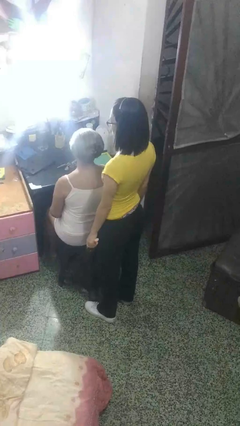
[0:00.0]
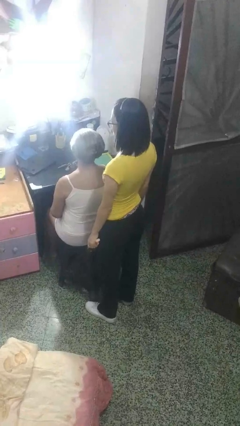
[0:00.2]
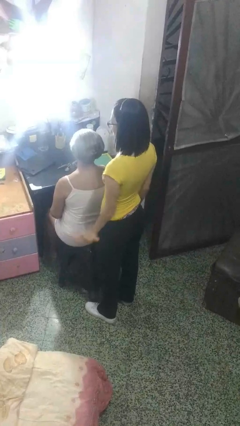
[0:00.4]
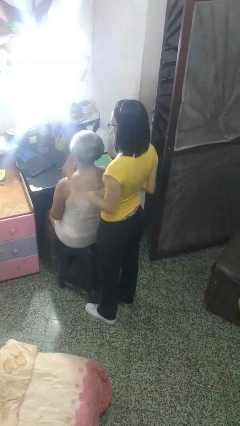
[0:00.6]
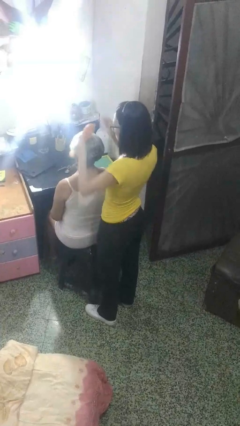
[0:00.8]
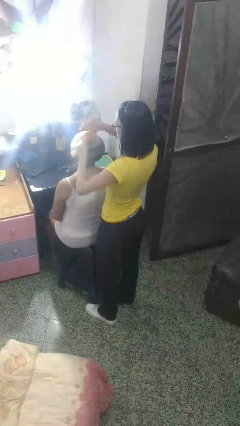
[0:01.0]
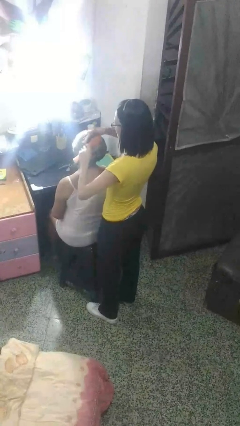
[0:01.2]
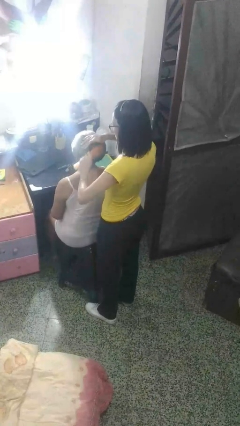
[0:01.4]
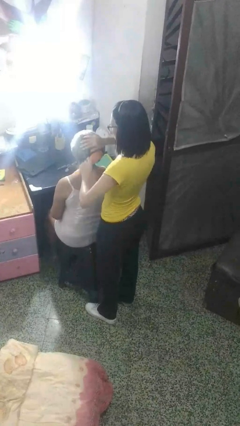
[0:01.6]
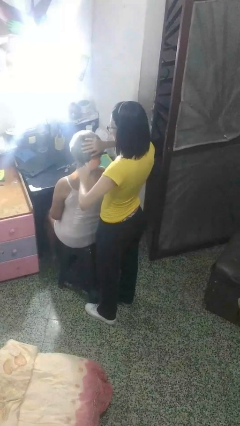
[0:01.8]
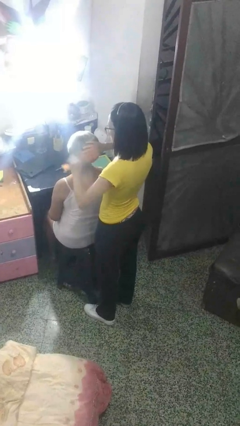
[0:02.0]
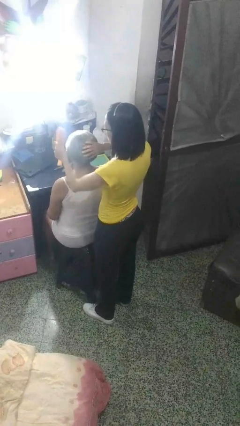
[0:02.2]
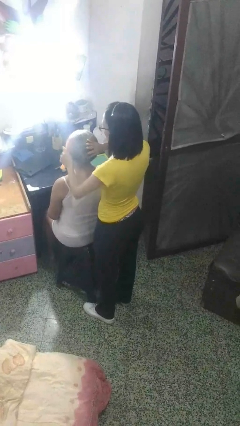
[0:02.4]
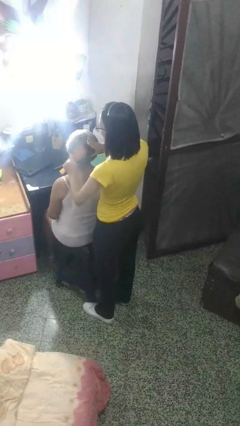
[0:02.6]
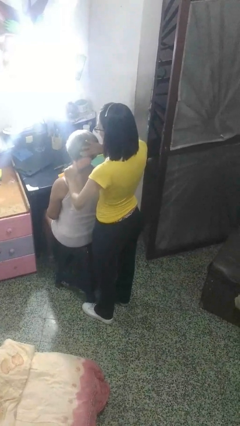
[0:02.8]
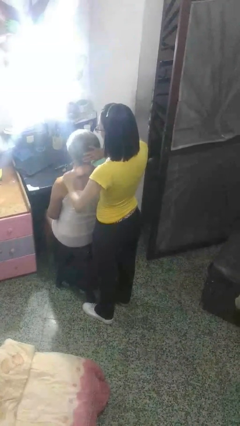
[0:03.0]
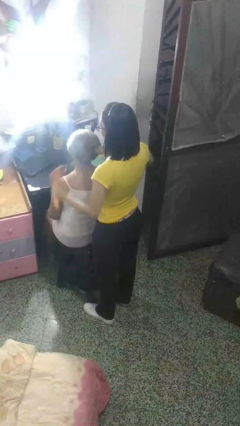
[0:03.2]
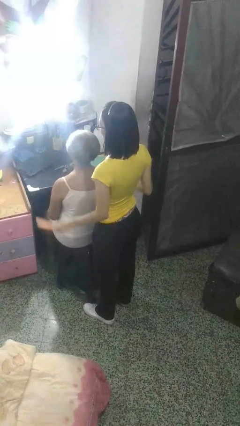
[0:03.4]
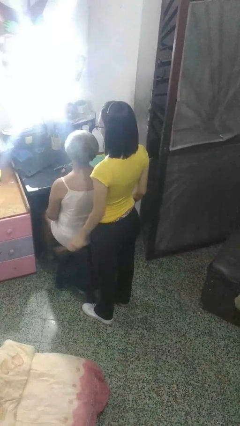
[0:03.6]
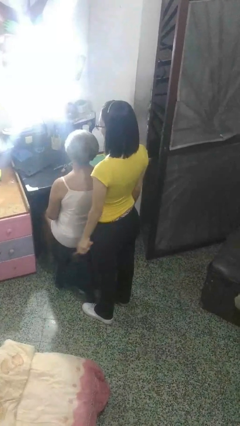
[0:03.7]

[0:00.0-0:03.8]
person brushes hair of person

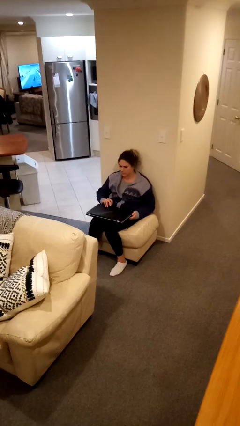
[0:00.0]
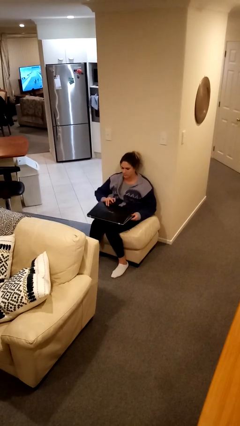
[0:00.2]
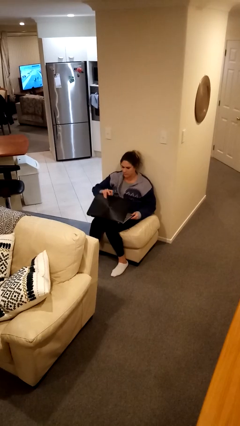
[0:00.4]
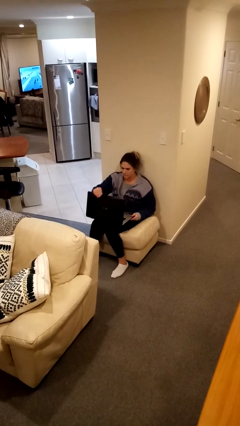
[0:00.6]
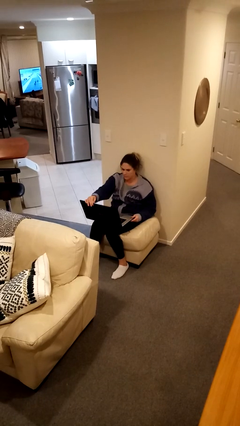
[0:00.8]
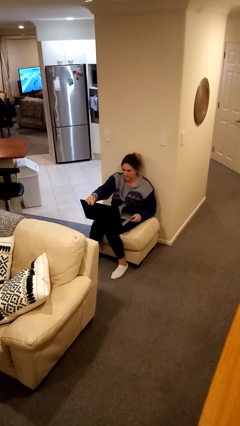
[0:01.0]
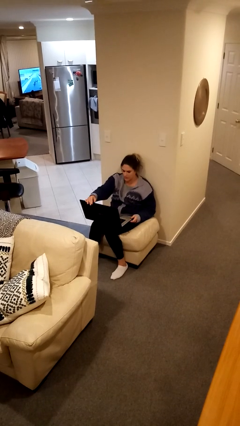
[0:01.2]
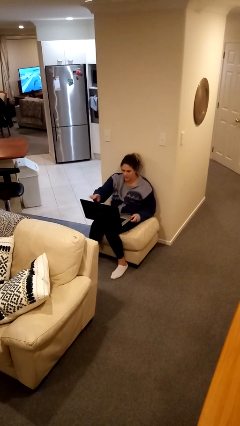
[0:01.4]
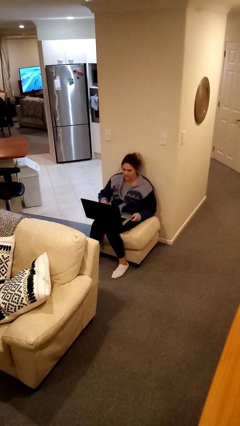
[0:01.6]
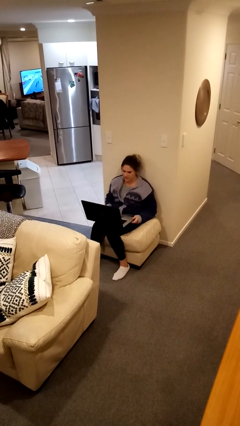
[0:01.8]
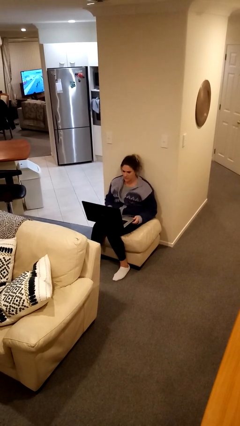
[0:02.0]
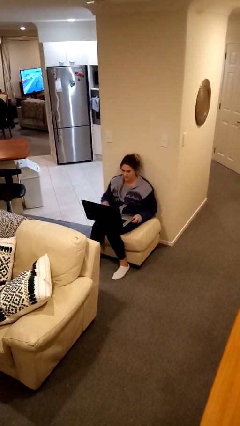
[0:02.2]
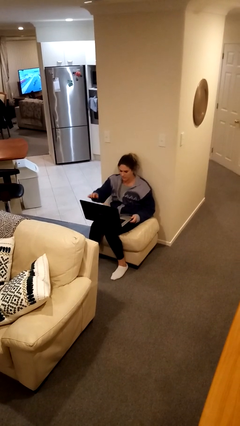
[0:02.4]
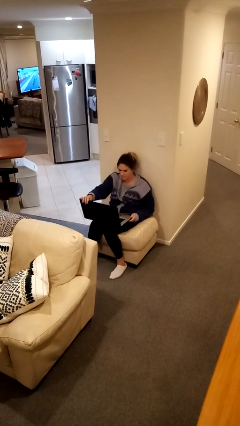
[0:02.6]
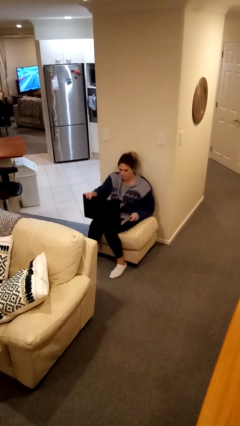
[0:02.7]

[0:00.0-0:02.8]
person opens laptop

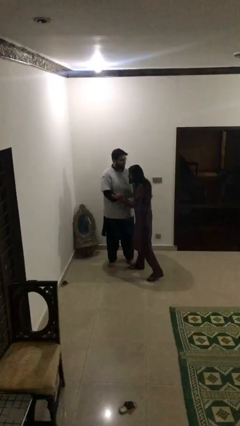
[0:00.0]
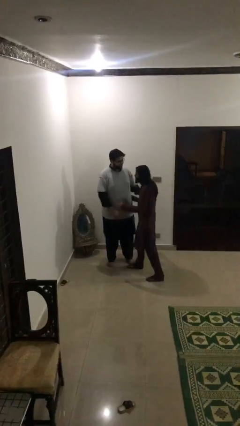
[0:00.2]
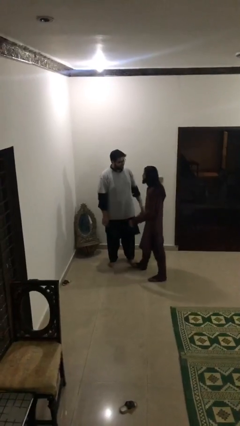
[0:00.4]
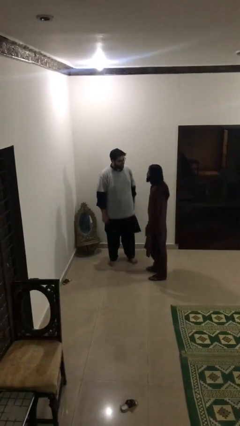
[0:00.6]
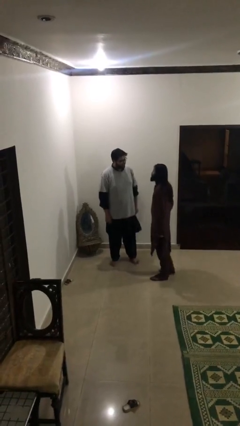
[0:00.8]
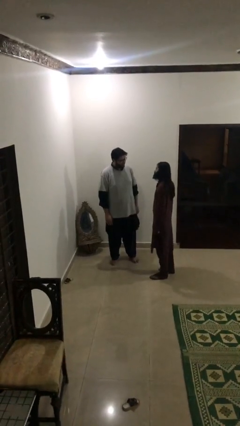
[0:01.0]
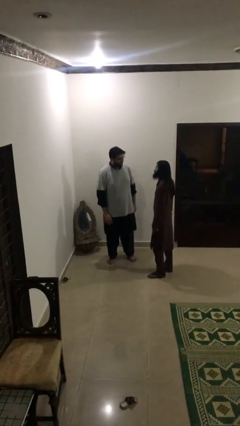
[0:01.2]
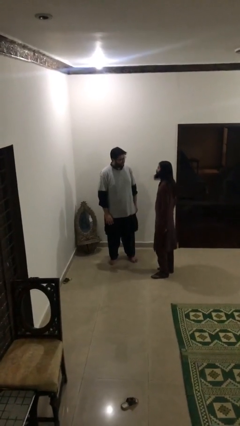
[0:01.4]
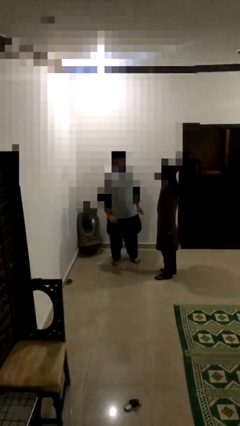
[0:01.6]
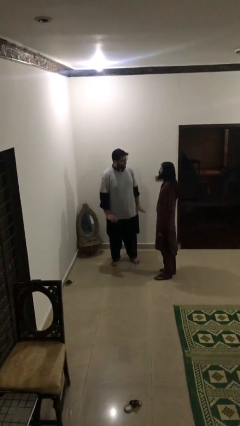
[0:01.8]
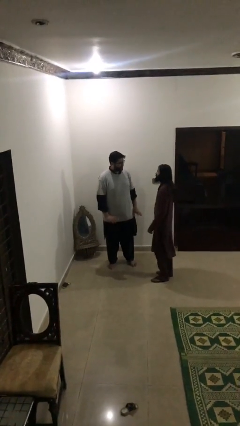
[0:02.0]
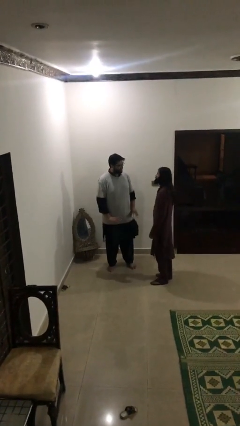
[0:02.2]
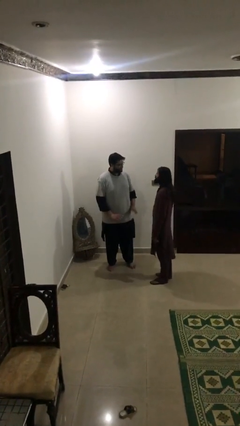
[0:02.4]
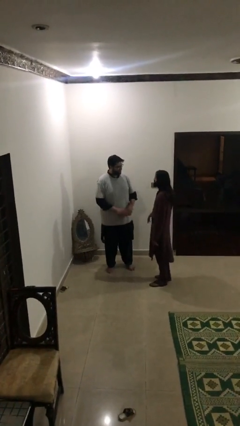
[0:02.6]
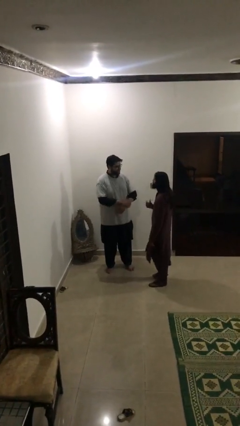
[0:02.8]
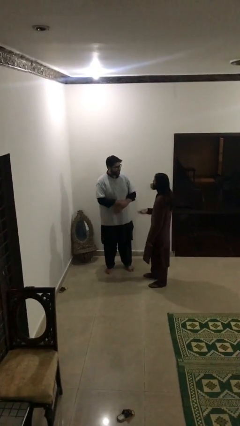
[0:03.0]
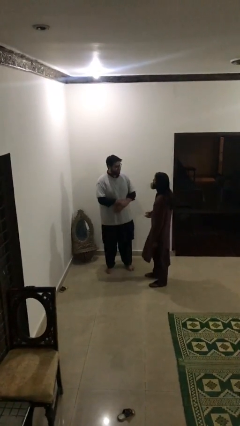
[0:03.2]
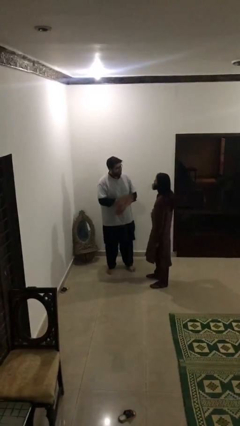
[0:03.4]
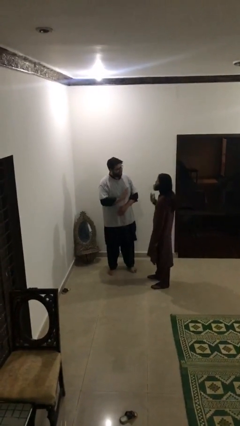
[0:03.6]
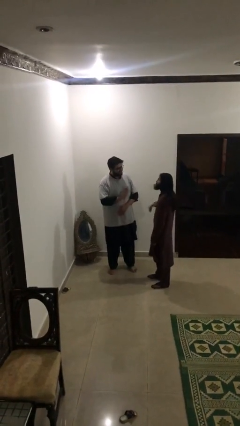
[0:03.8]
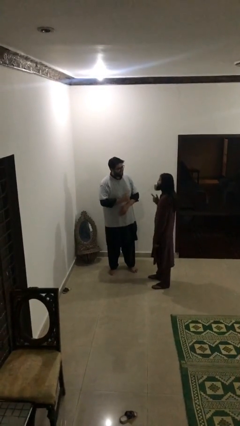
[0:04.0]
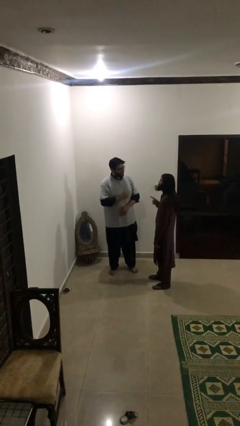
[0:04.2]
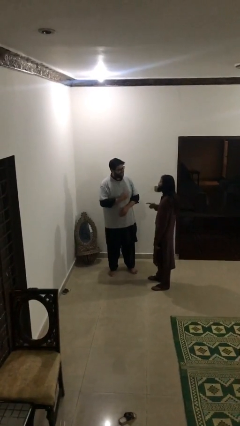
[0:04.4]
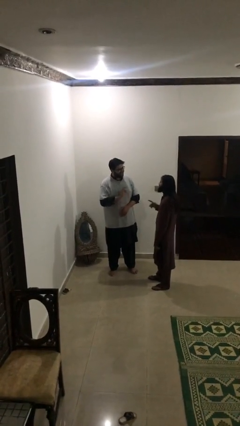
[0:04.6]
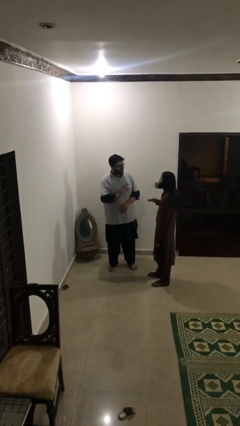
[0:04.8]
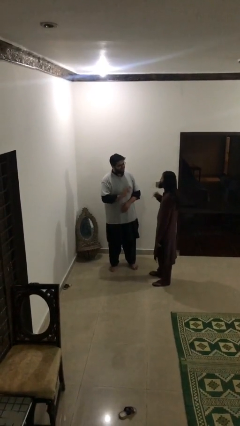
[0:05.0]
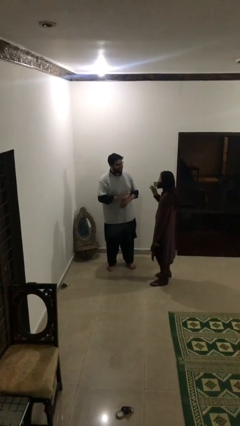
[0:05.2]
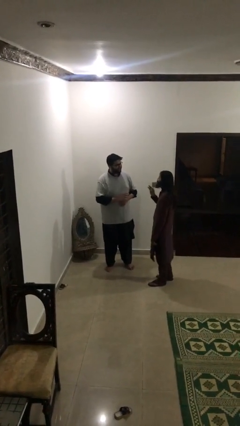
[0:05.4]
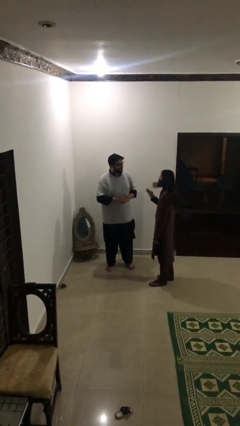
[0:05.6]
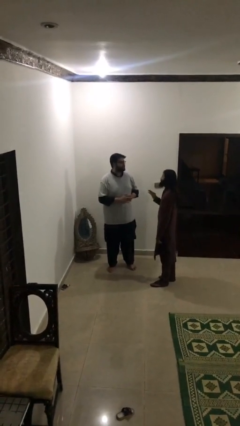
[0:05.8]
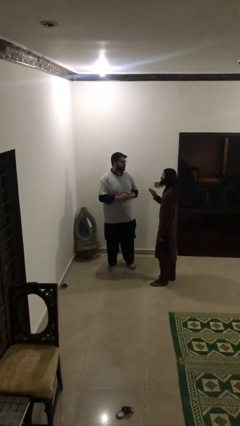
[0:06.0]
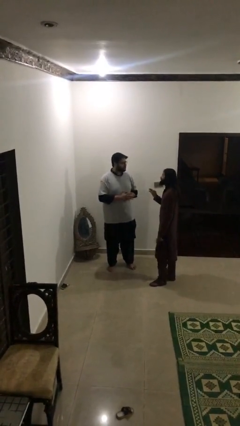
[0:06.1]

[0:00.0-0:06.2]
person talks to person

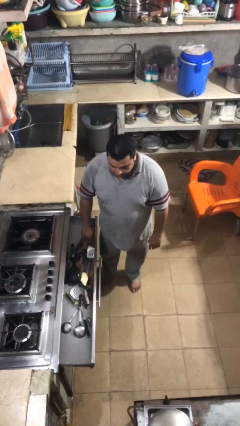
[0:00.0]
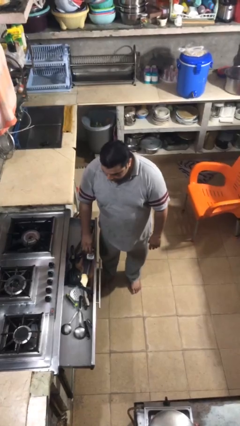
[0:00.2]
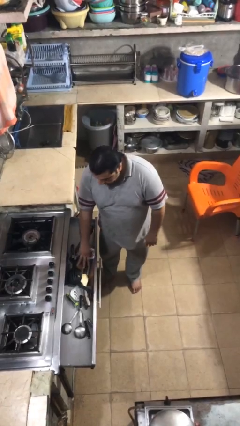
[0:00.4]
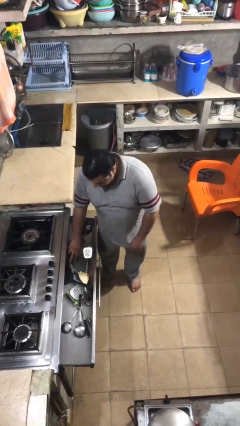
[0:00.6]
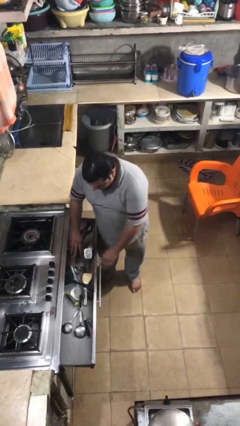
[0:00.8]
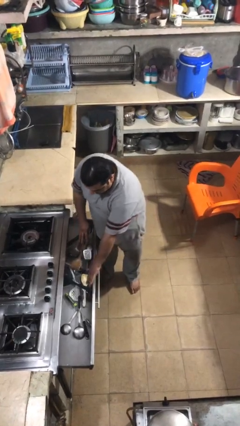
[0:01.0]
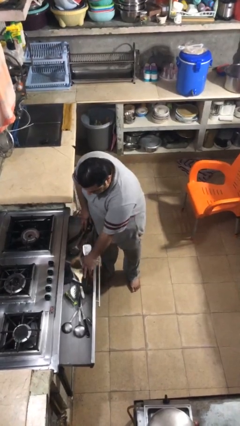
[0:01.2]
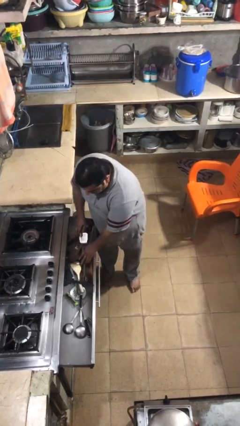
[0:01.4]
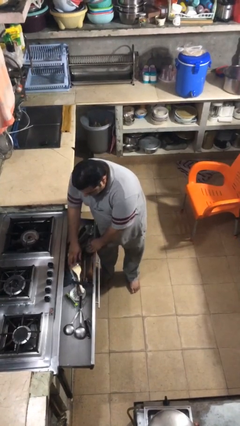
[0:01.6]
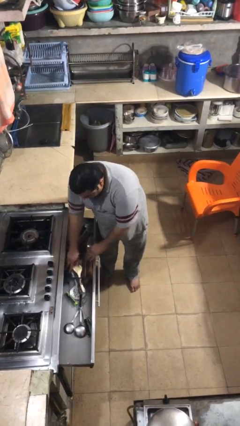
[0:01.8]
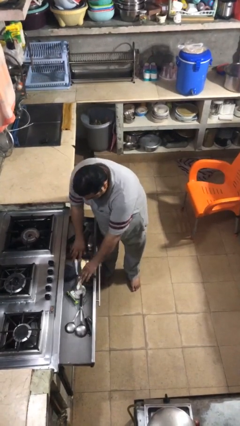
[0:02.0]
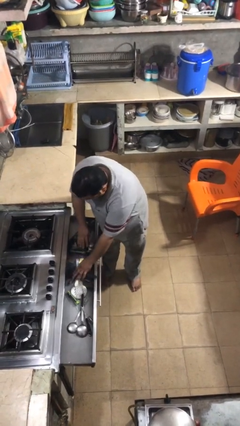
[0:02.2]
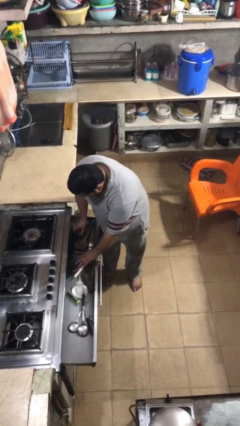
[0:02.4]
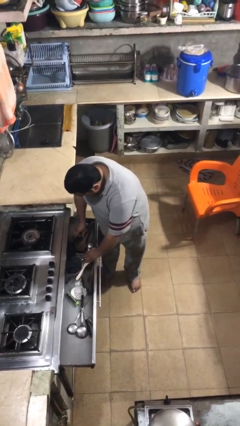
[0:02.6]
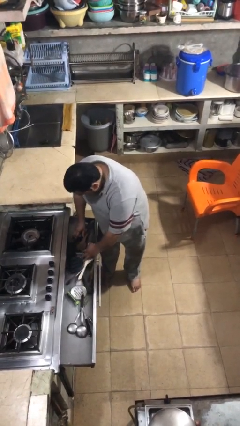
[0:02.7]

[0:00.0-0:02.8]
person searches in kitchen drawer

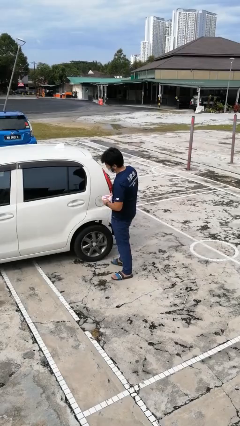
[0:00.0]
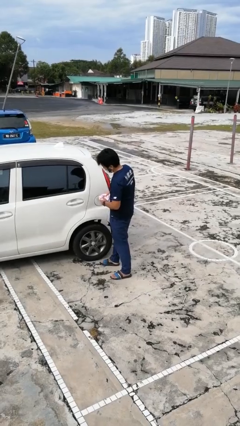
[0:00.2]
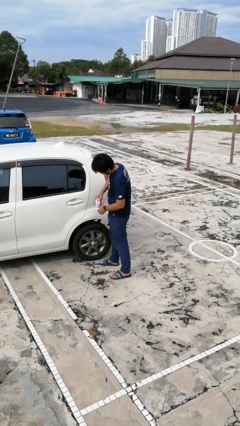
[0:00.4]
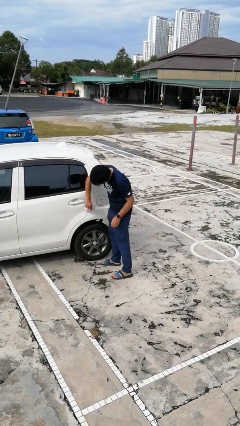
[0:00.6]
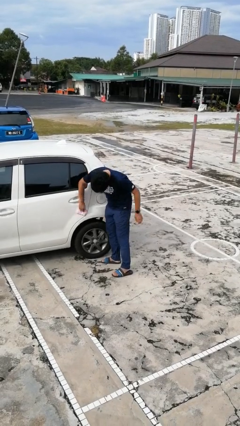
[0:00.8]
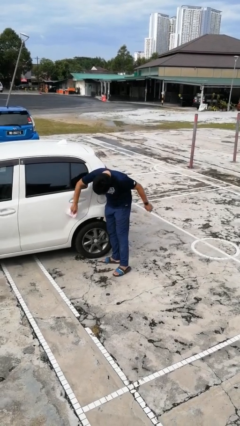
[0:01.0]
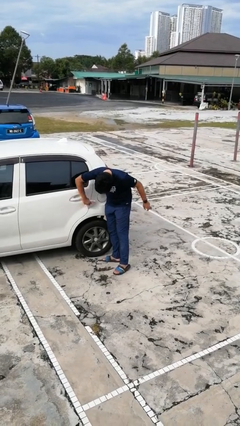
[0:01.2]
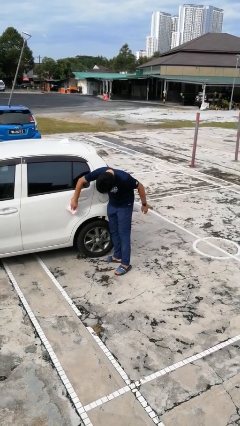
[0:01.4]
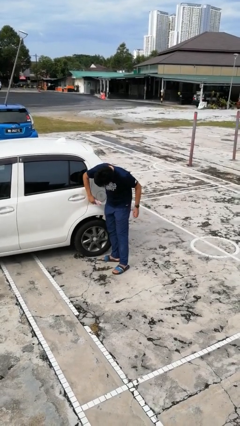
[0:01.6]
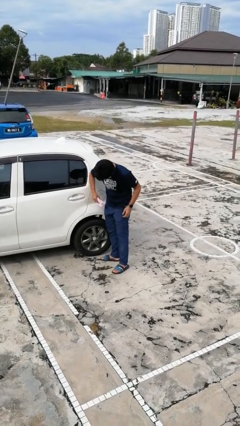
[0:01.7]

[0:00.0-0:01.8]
person polishes car with rag

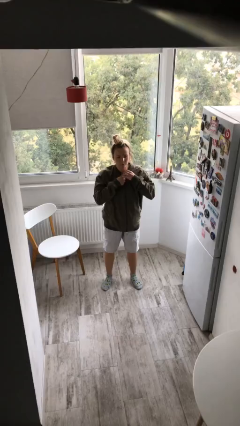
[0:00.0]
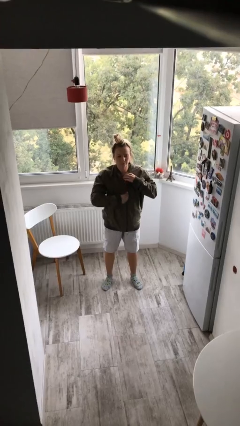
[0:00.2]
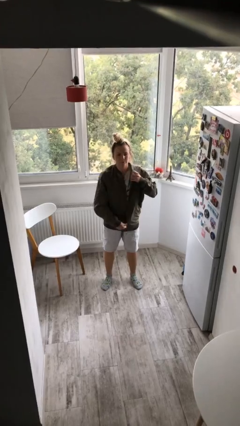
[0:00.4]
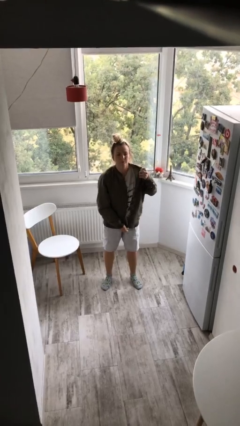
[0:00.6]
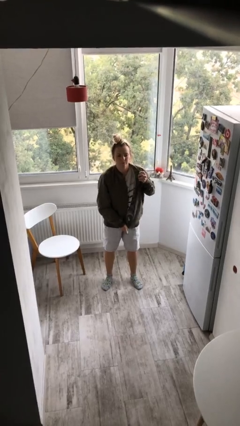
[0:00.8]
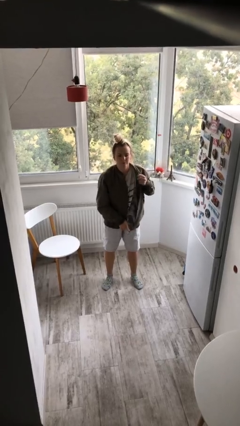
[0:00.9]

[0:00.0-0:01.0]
person unzips jacket
